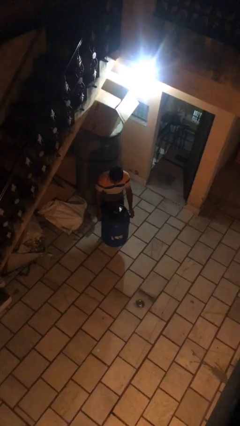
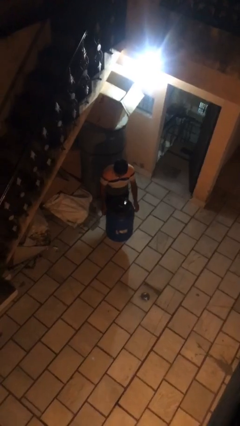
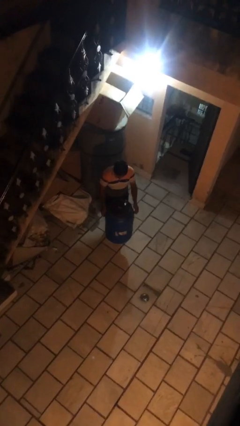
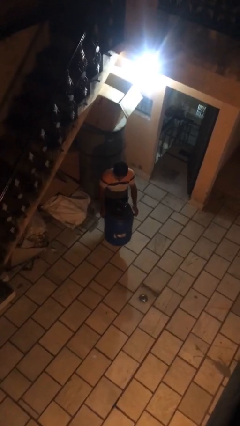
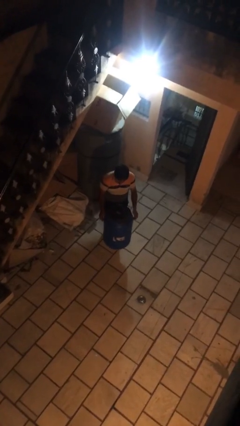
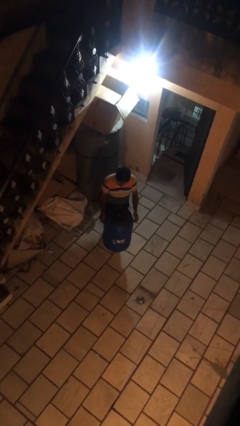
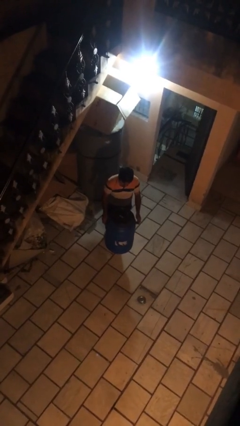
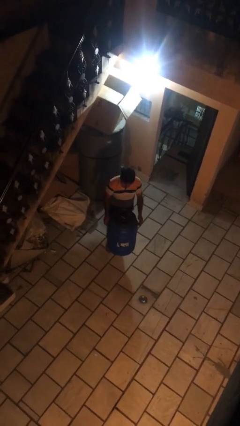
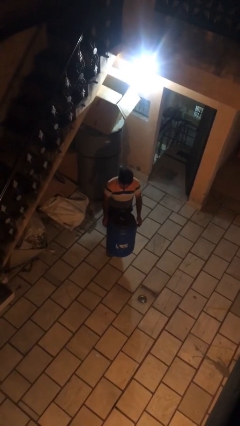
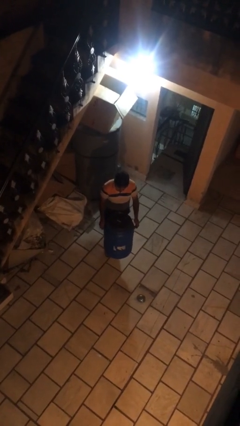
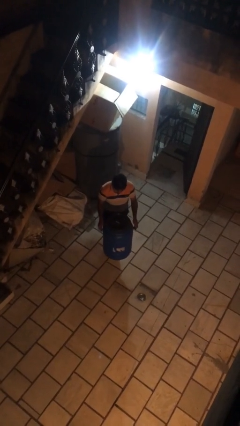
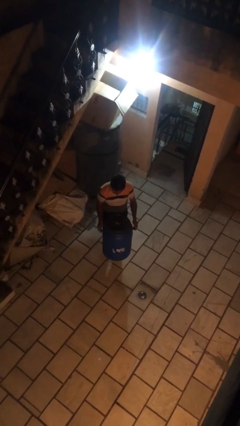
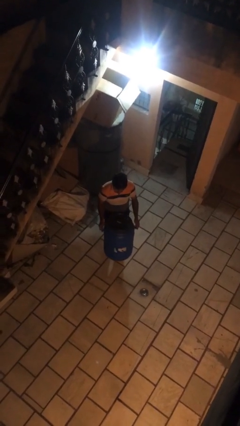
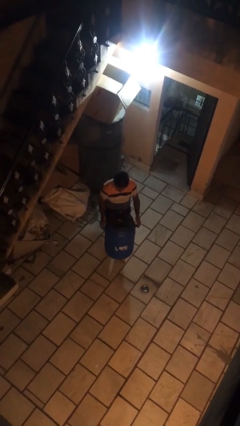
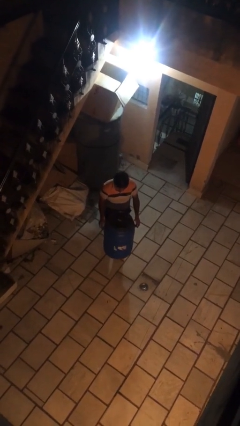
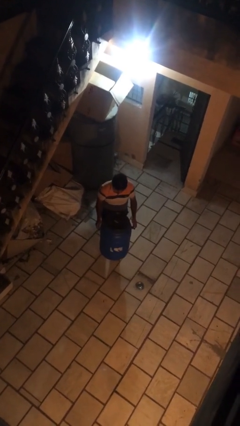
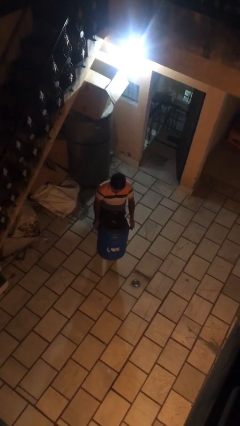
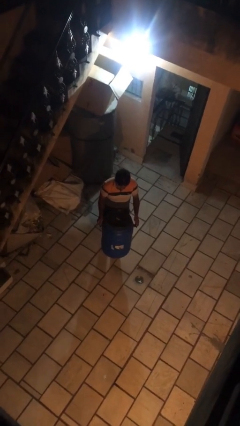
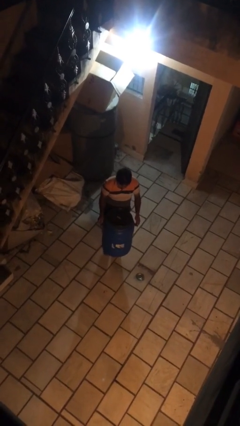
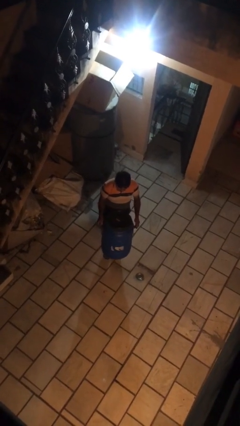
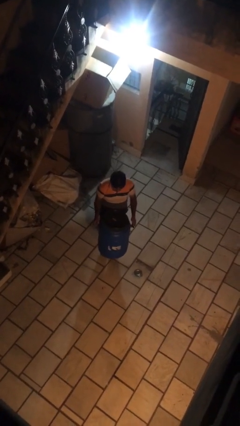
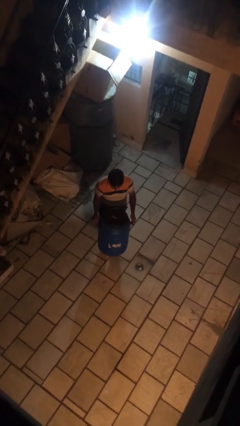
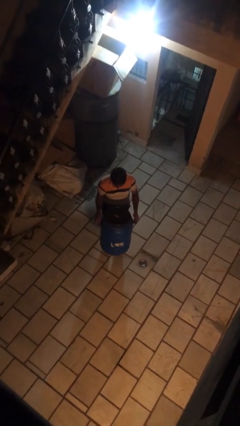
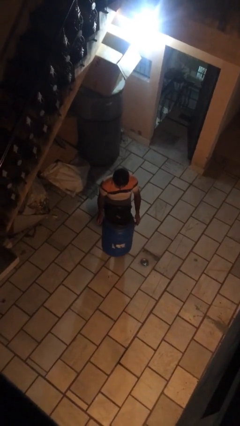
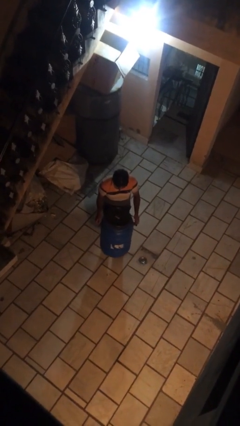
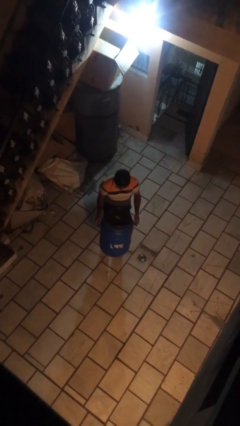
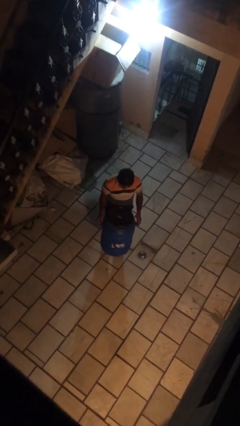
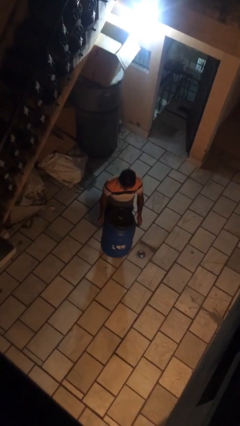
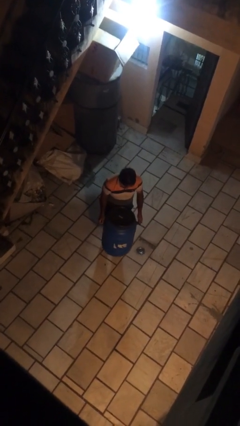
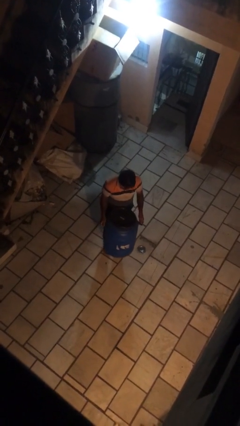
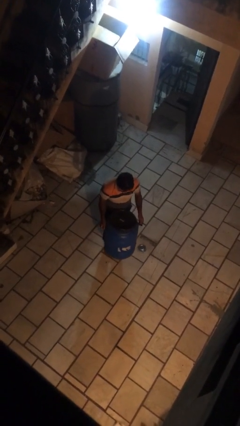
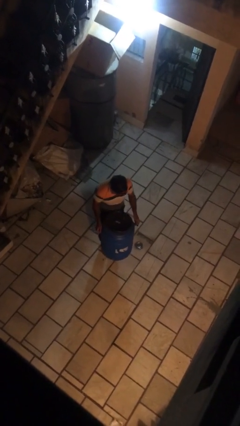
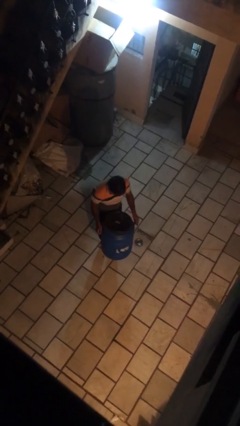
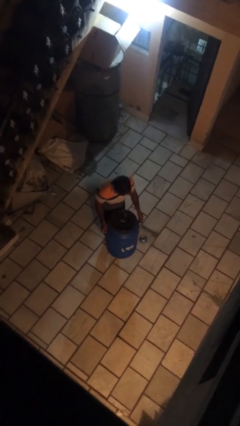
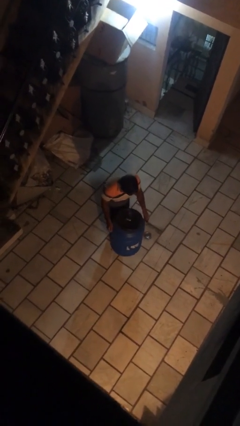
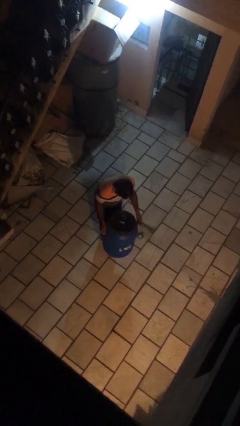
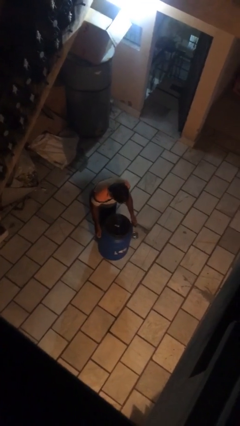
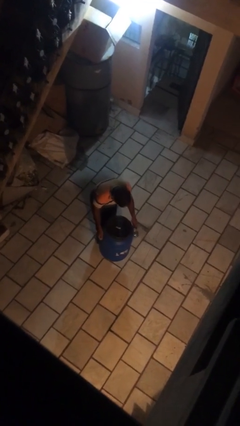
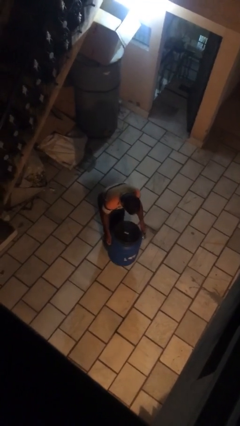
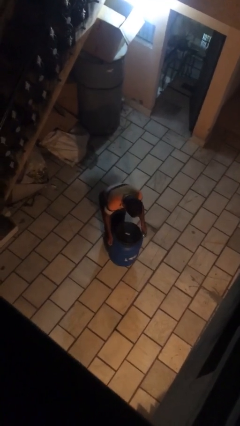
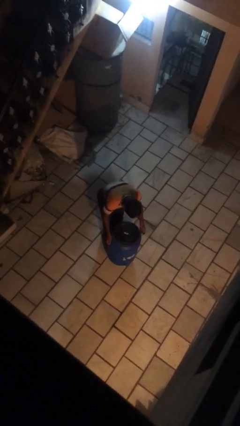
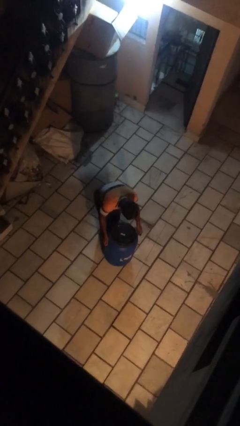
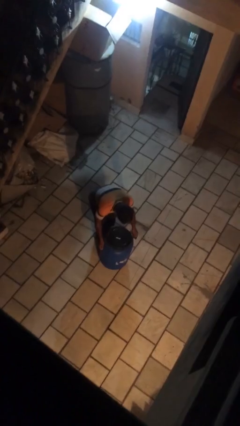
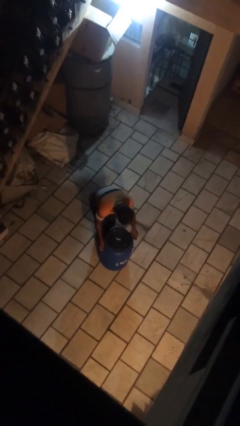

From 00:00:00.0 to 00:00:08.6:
person carries heavy object

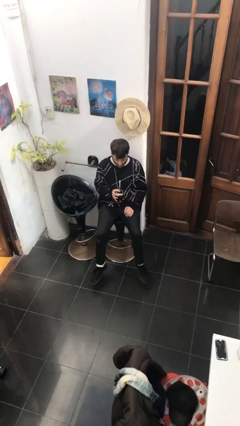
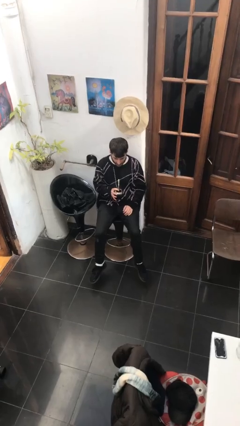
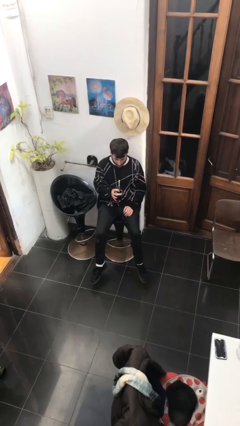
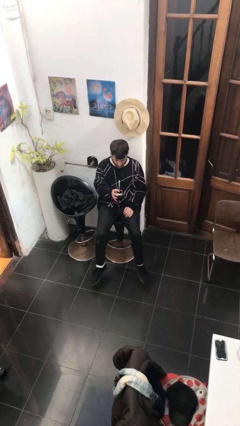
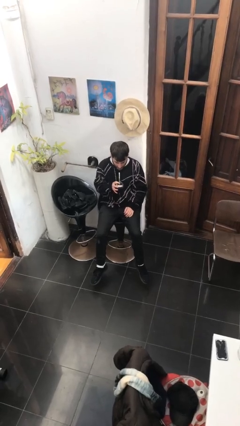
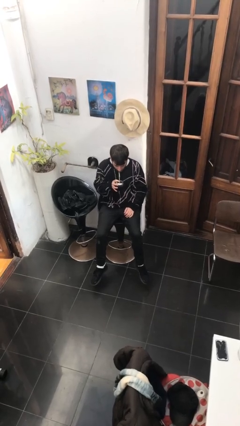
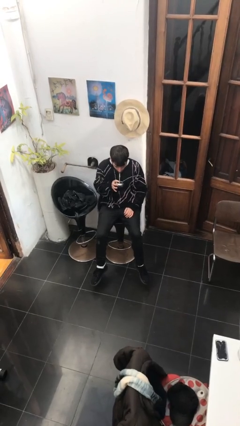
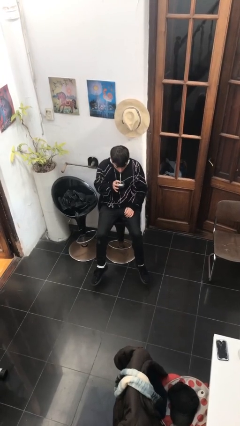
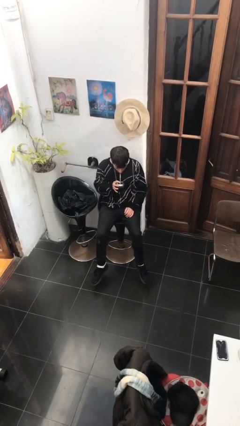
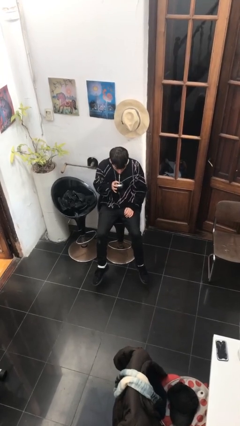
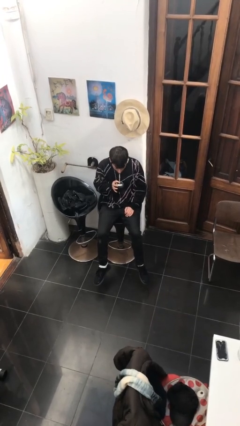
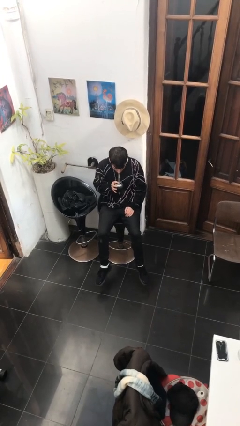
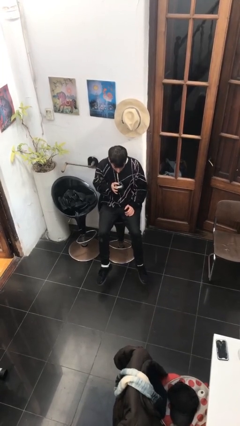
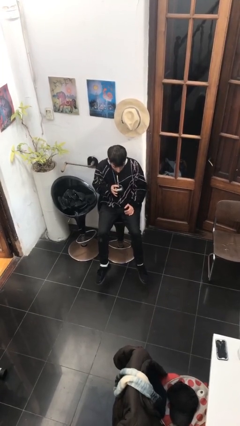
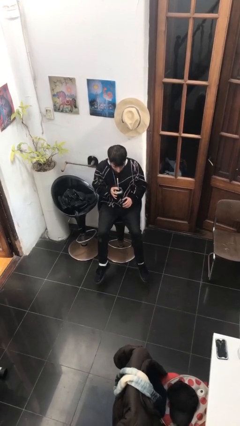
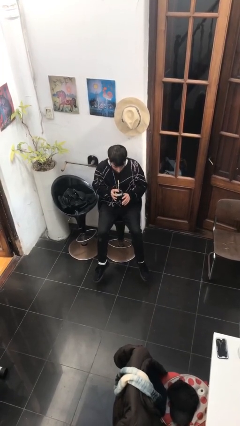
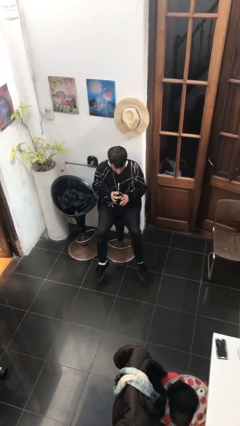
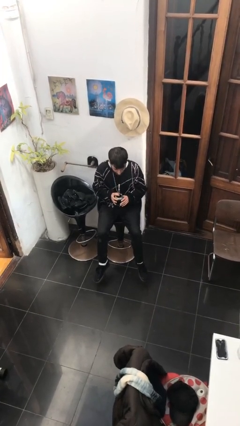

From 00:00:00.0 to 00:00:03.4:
person drinks from straw

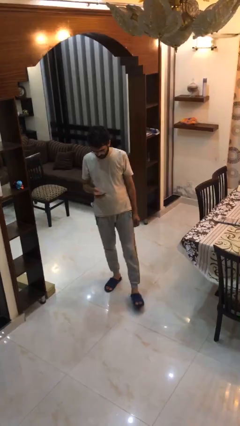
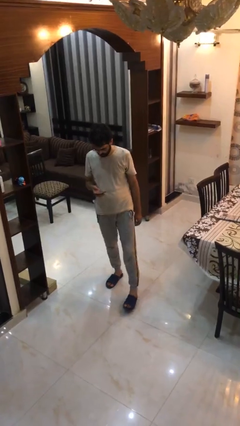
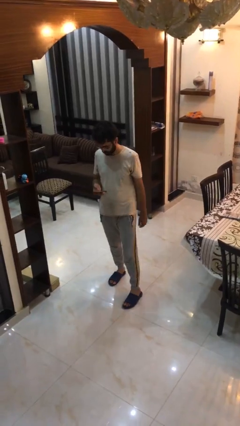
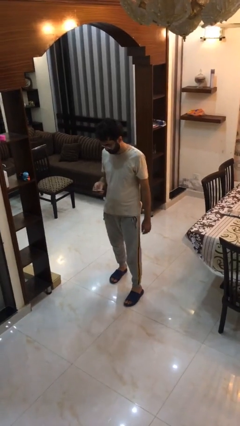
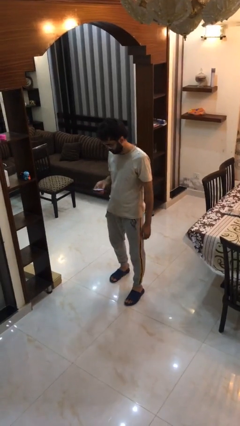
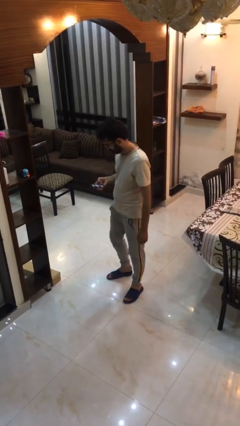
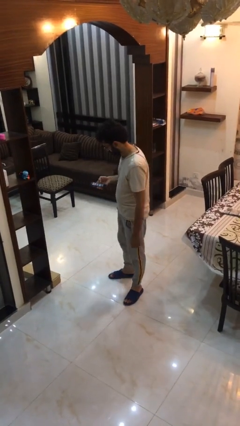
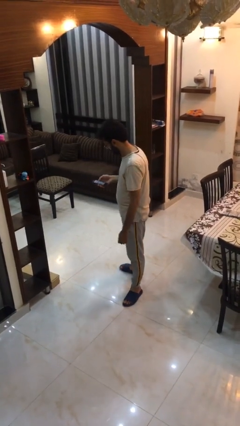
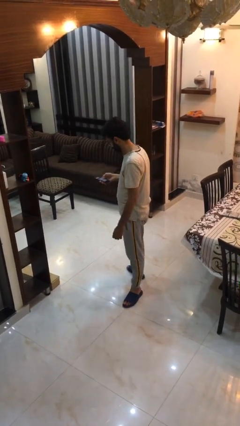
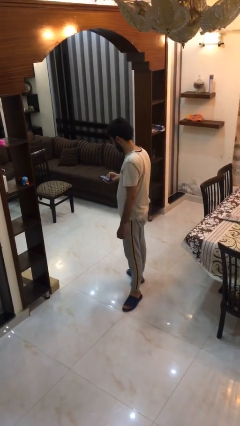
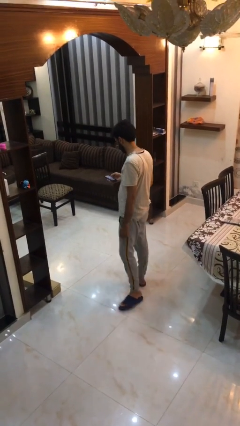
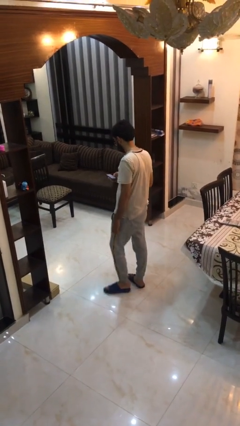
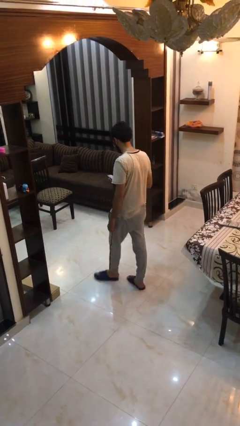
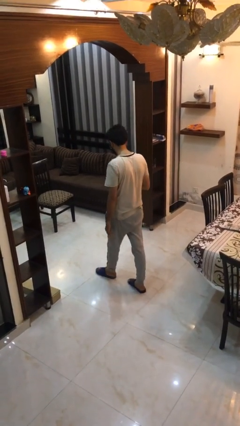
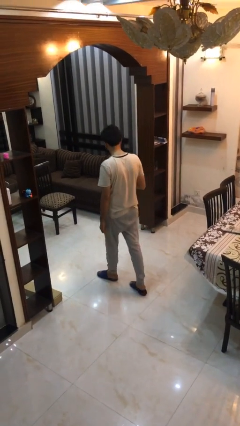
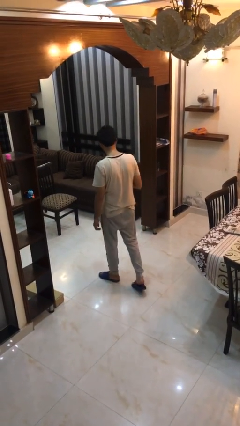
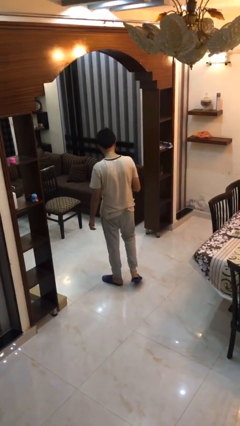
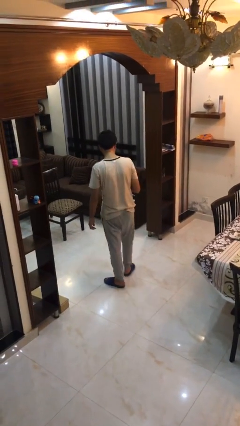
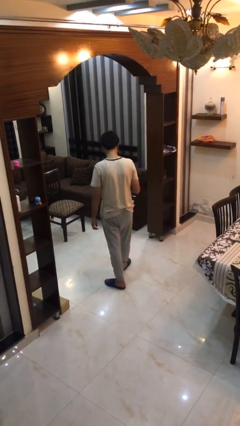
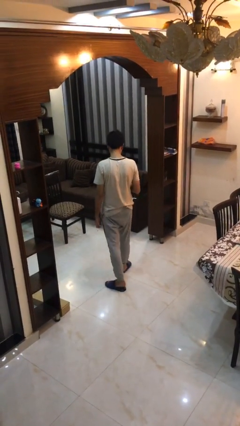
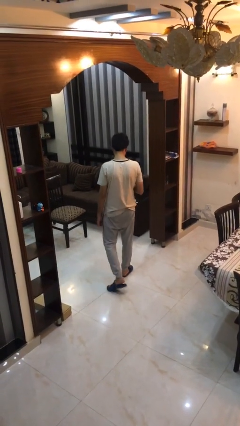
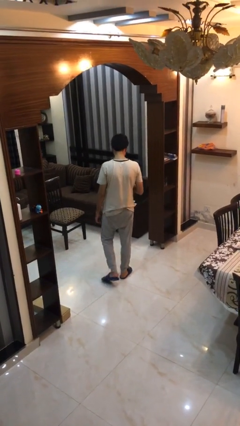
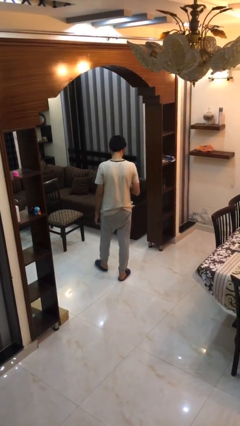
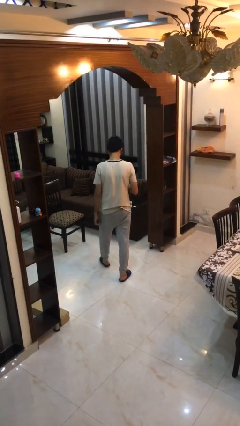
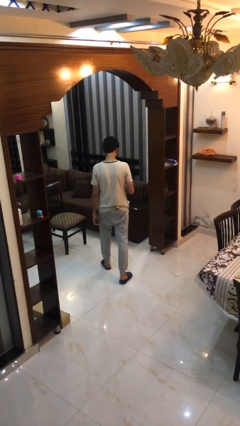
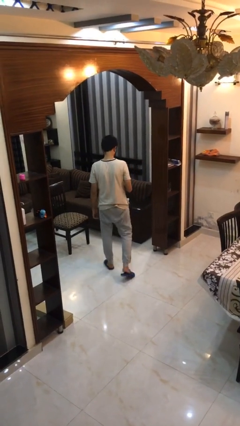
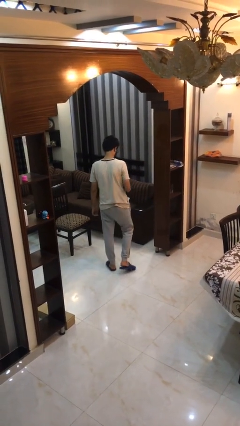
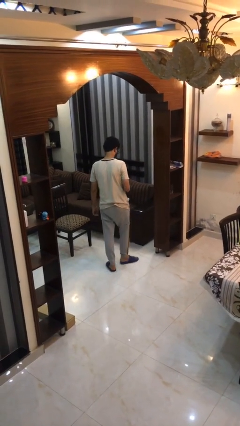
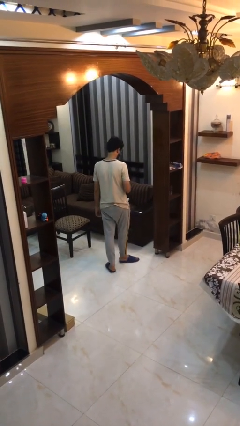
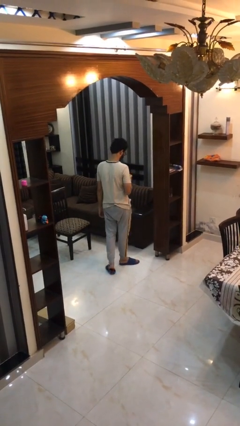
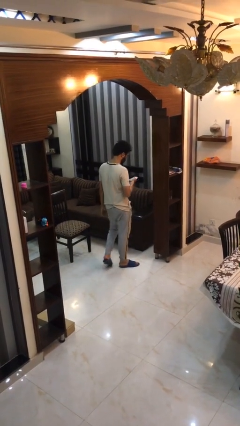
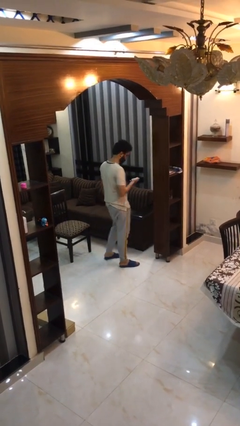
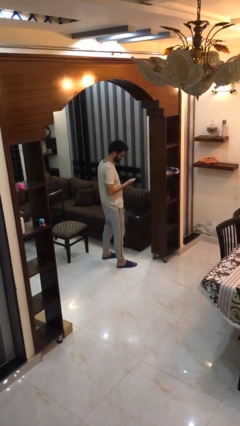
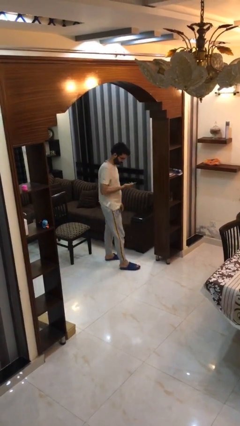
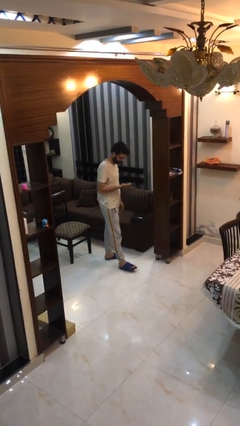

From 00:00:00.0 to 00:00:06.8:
person texts on phone
